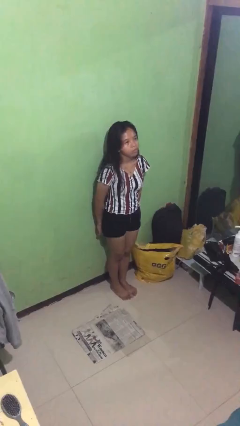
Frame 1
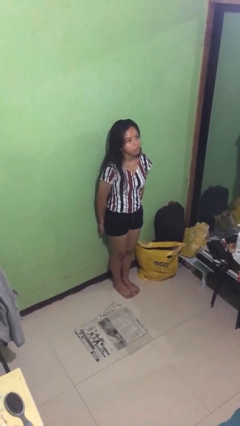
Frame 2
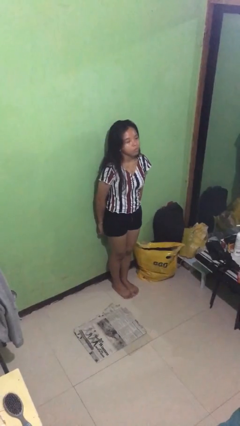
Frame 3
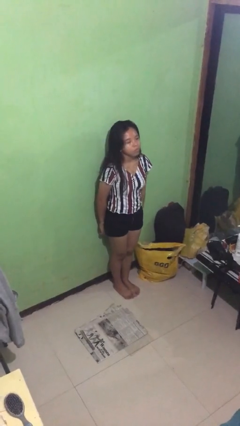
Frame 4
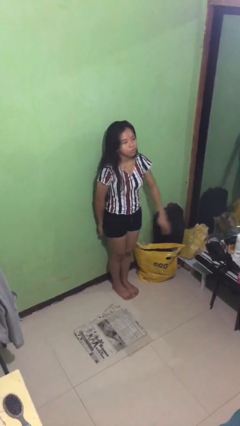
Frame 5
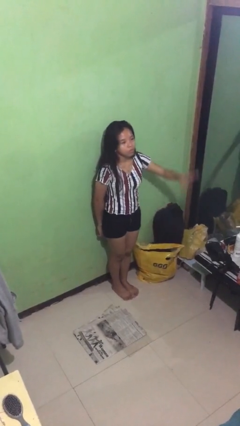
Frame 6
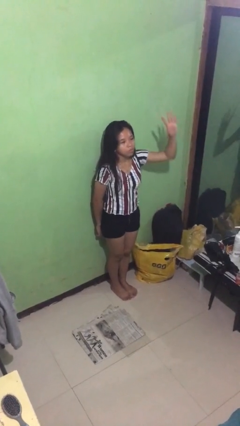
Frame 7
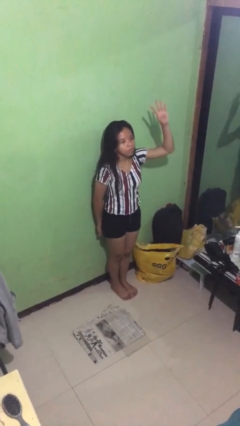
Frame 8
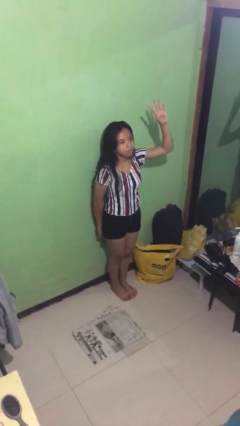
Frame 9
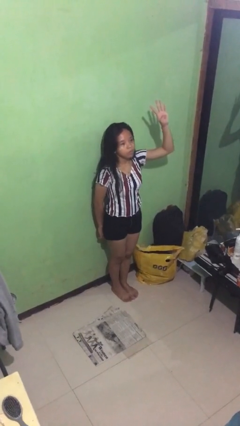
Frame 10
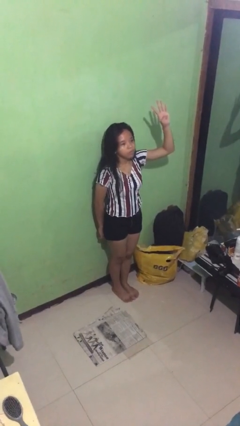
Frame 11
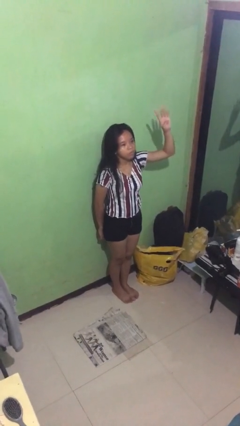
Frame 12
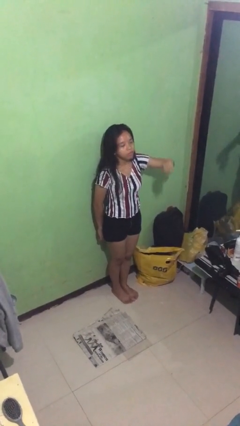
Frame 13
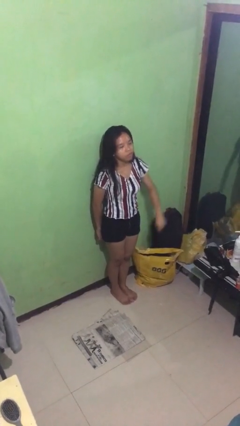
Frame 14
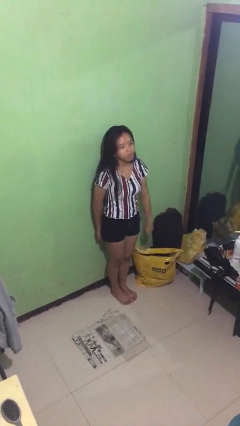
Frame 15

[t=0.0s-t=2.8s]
person gestures number four

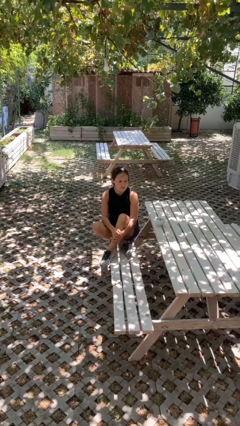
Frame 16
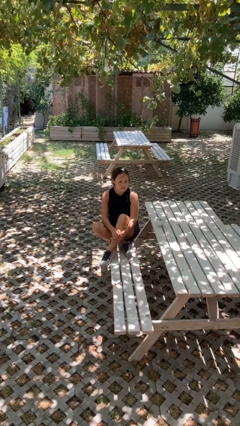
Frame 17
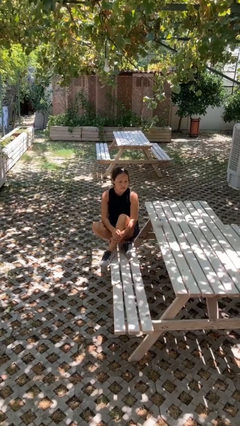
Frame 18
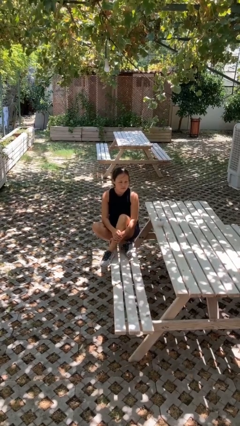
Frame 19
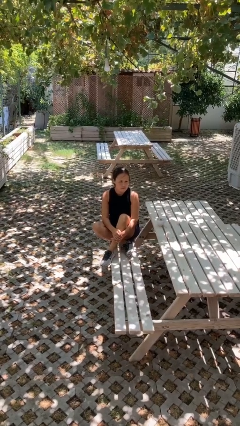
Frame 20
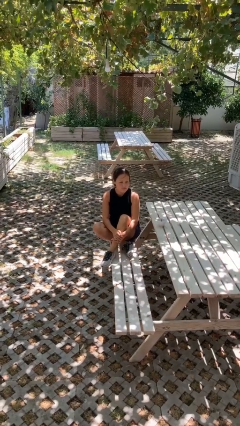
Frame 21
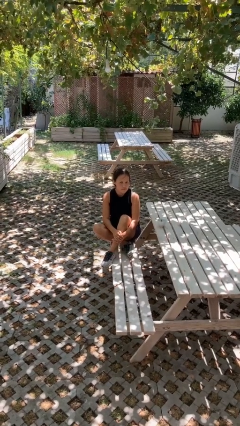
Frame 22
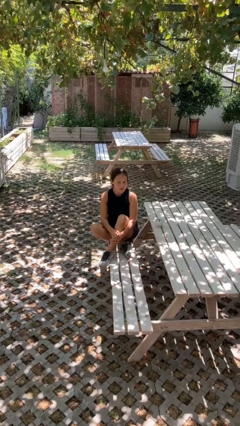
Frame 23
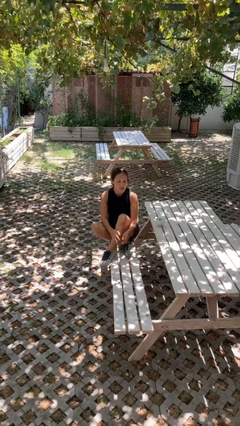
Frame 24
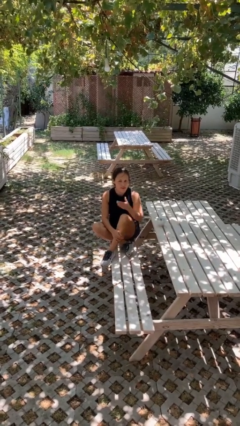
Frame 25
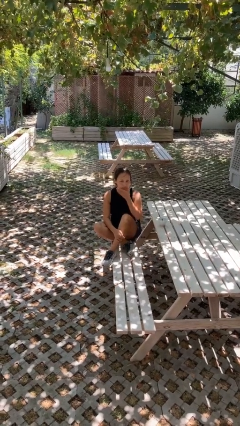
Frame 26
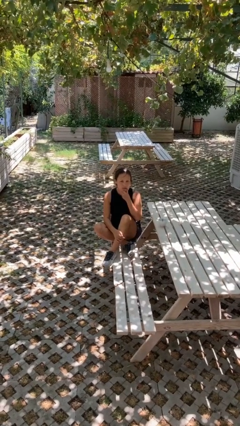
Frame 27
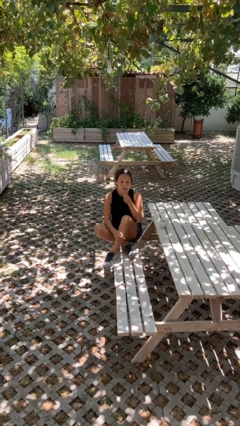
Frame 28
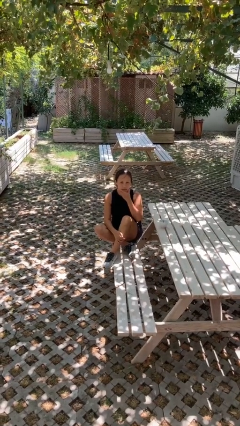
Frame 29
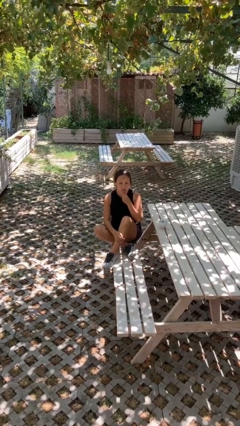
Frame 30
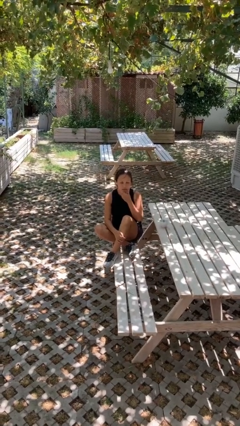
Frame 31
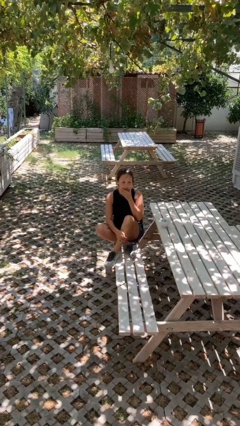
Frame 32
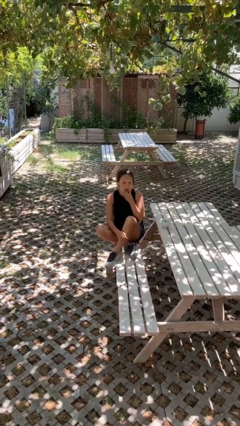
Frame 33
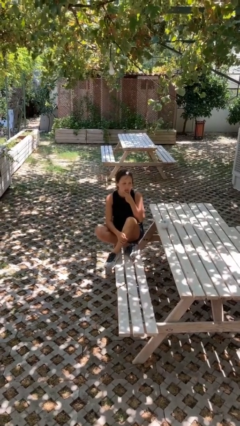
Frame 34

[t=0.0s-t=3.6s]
person strokes chin

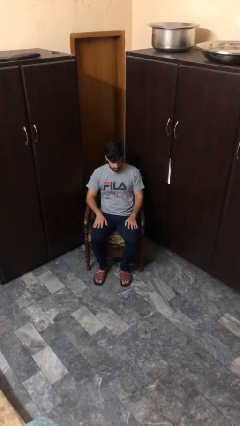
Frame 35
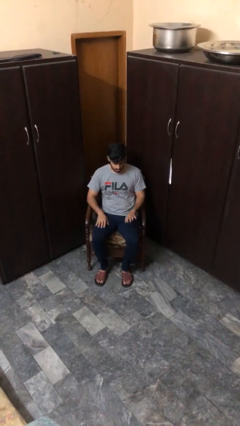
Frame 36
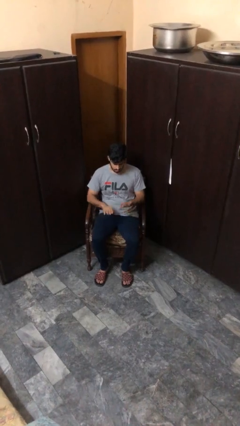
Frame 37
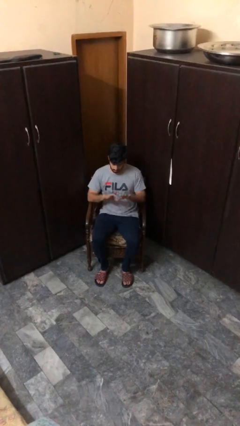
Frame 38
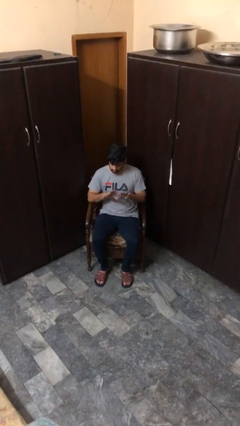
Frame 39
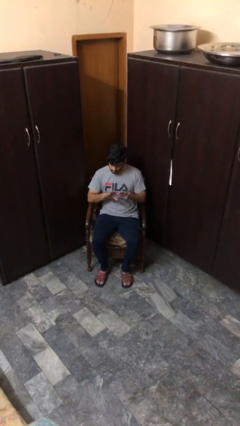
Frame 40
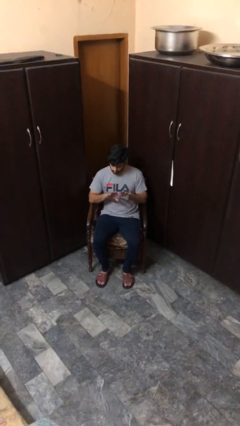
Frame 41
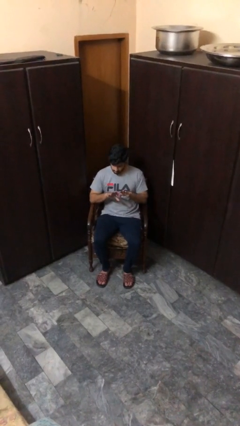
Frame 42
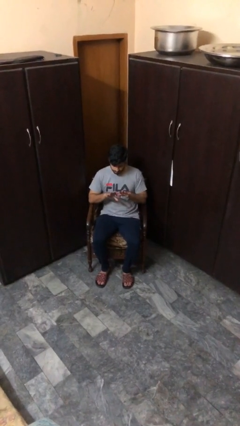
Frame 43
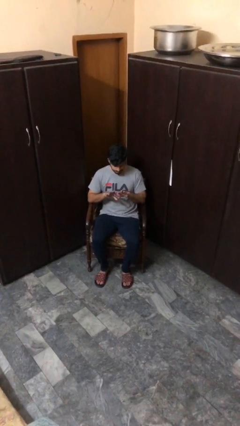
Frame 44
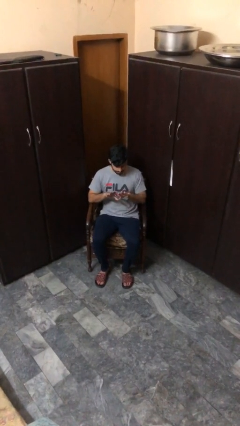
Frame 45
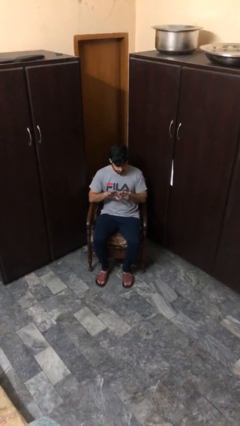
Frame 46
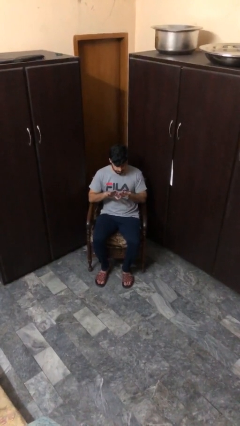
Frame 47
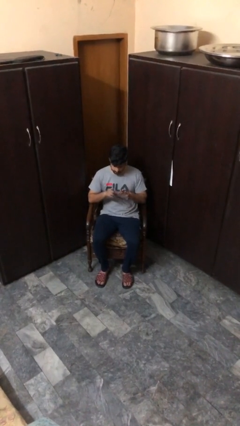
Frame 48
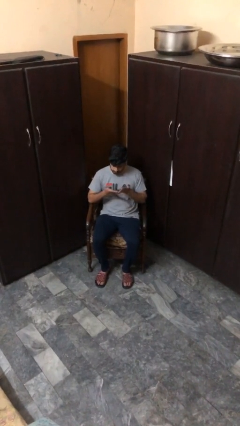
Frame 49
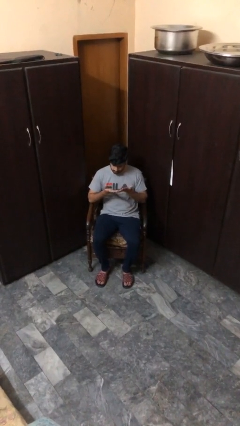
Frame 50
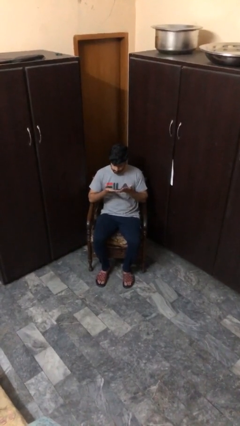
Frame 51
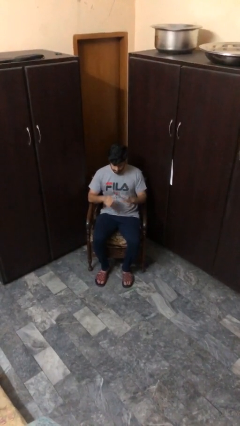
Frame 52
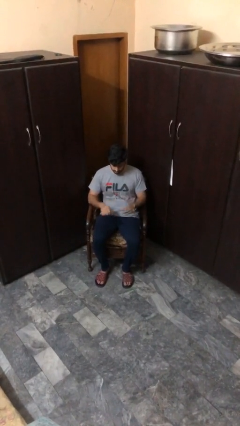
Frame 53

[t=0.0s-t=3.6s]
person looks at hands in lap

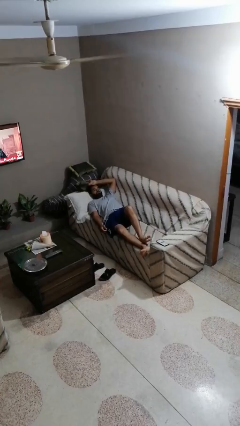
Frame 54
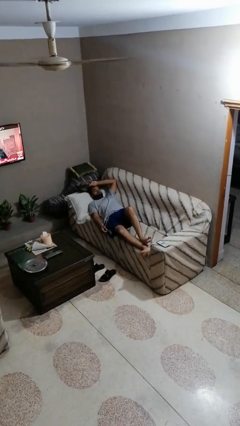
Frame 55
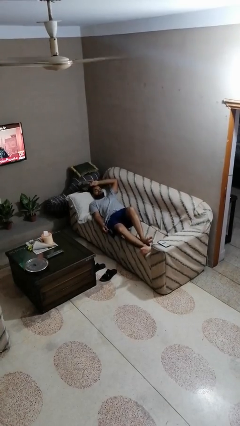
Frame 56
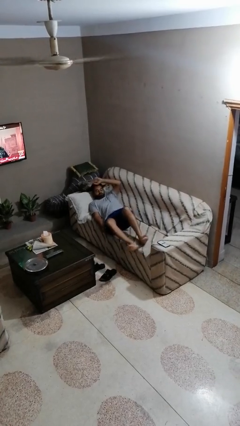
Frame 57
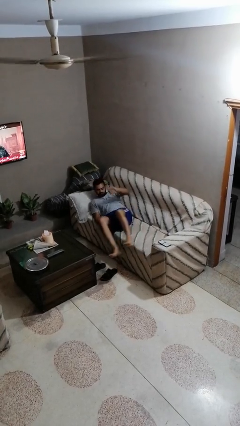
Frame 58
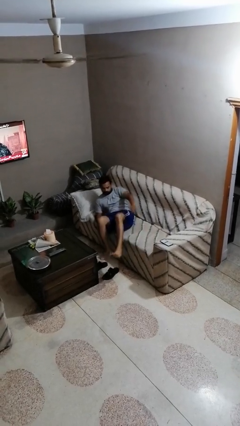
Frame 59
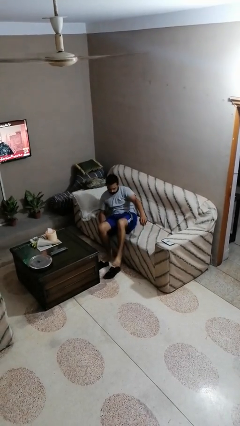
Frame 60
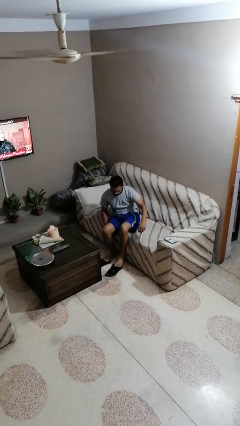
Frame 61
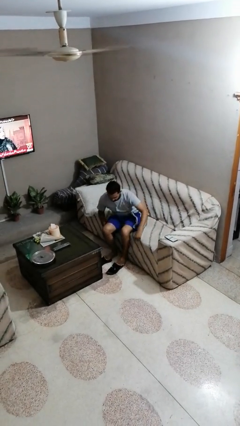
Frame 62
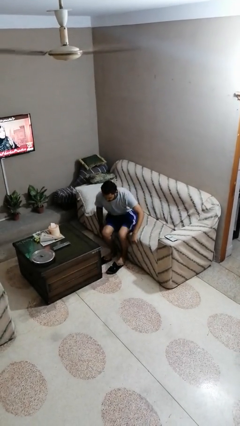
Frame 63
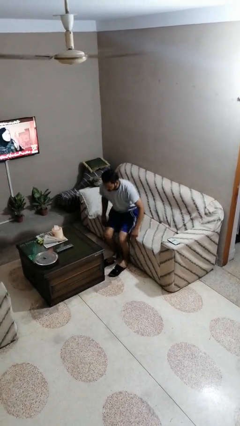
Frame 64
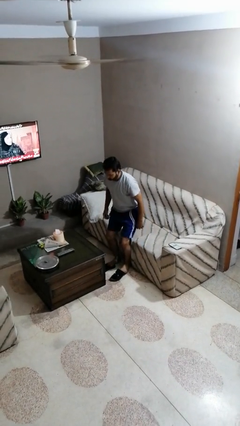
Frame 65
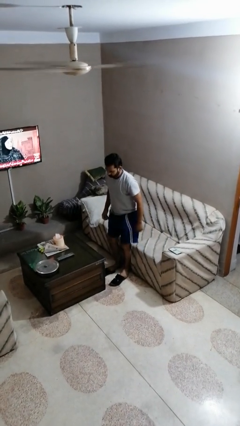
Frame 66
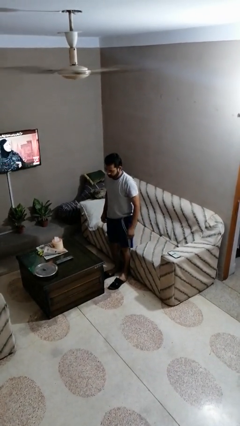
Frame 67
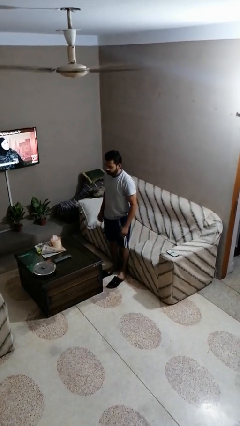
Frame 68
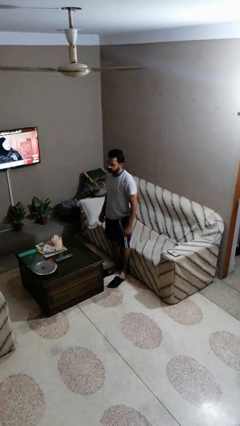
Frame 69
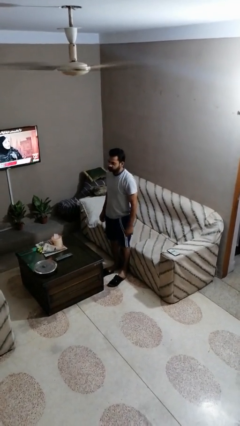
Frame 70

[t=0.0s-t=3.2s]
person stands up

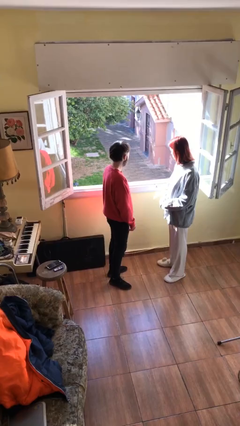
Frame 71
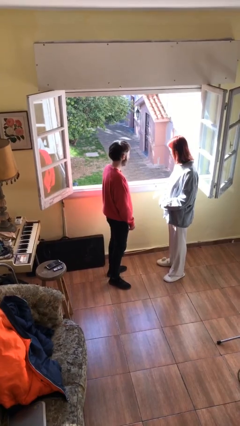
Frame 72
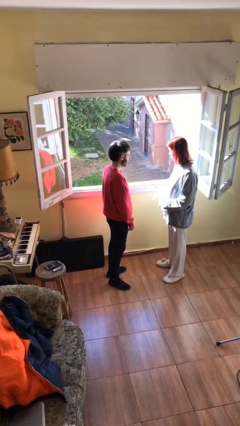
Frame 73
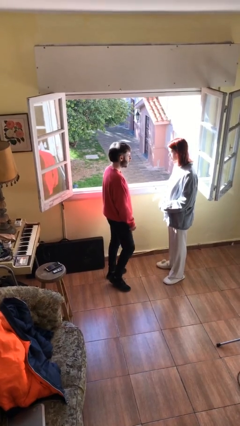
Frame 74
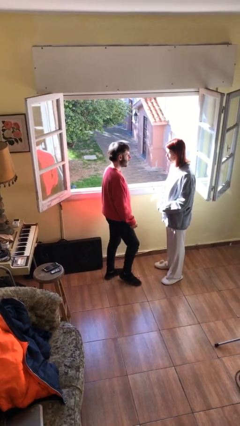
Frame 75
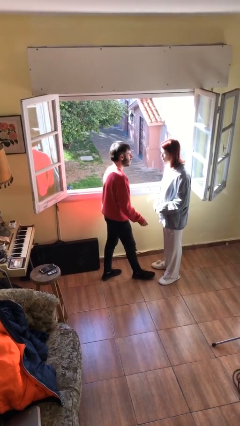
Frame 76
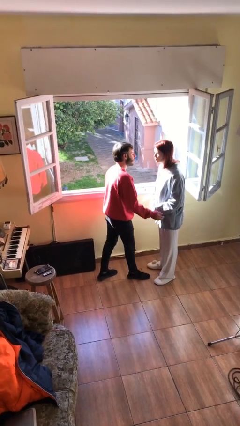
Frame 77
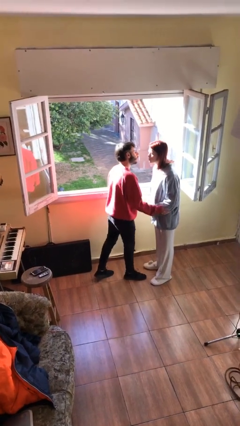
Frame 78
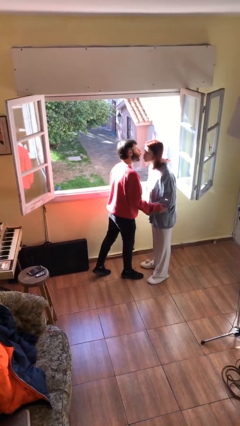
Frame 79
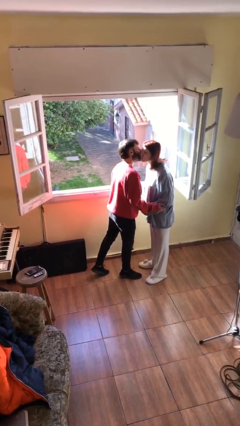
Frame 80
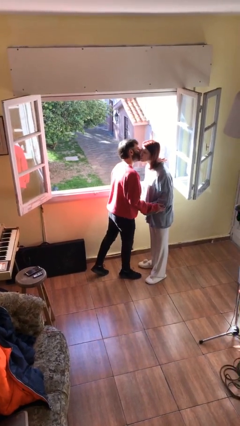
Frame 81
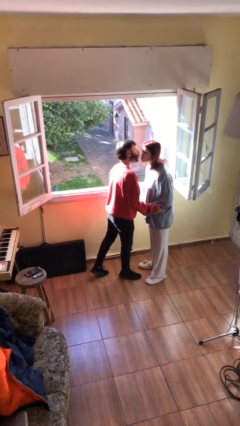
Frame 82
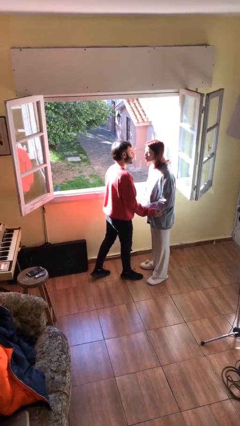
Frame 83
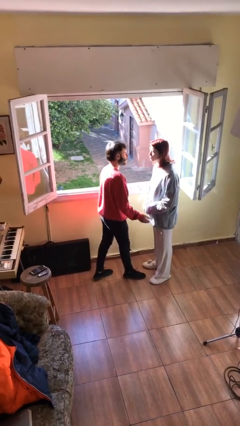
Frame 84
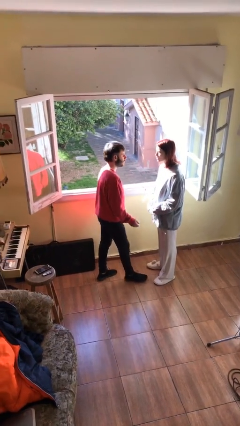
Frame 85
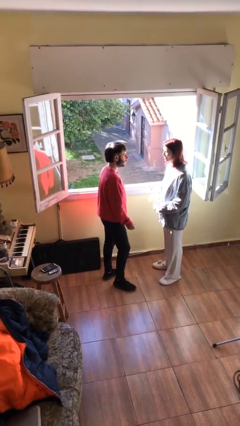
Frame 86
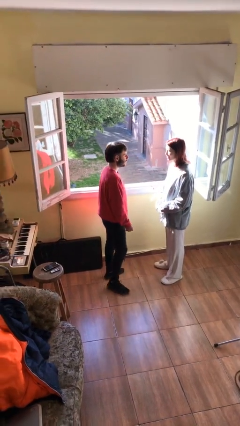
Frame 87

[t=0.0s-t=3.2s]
person kisses cheek of person

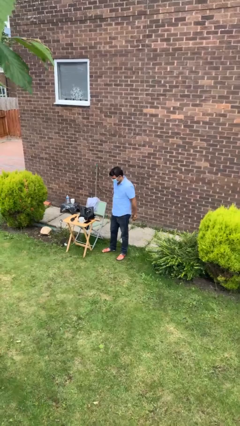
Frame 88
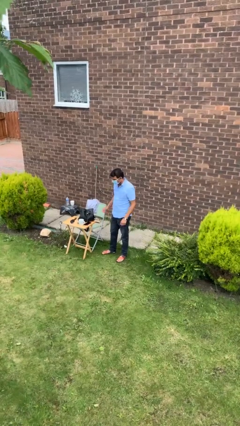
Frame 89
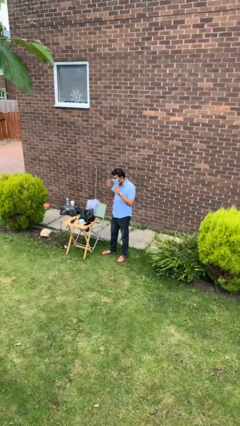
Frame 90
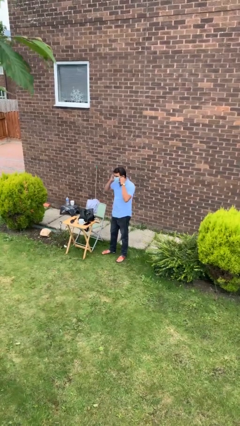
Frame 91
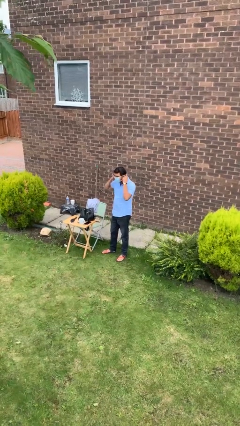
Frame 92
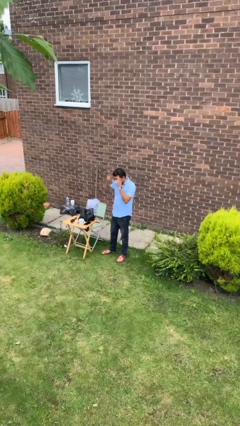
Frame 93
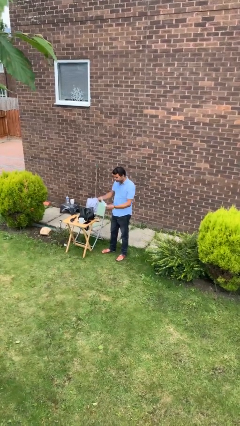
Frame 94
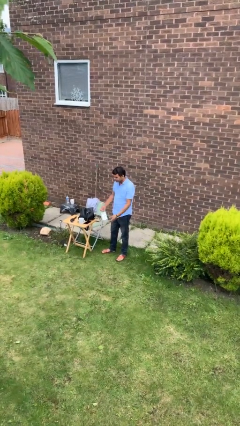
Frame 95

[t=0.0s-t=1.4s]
person takes off facemask
